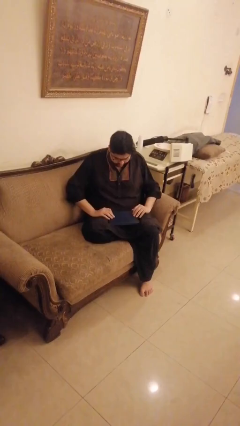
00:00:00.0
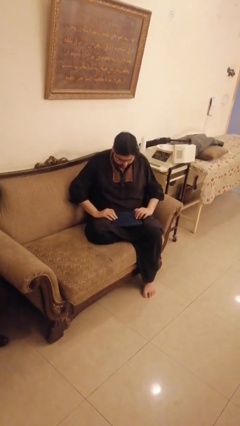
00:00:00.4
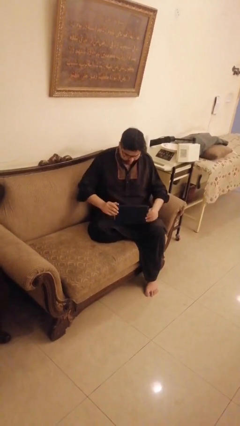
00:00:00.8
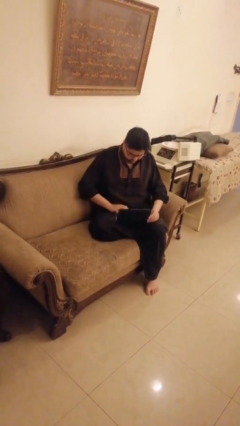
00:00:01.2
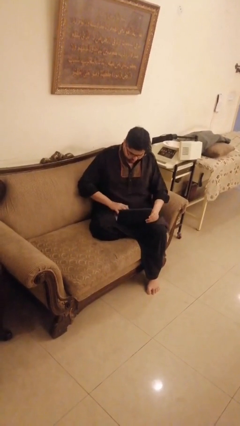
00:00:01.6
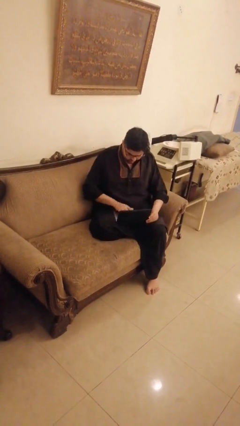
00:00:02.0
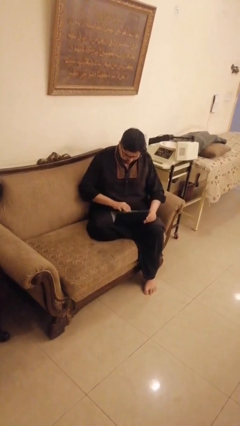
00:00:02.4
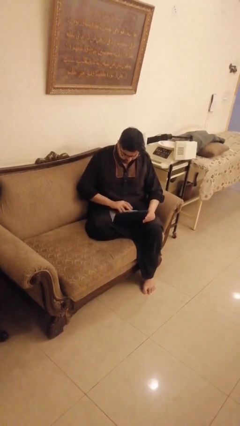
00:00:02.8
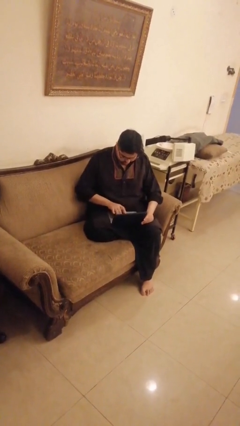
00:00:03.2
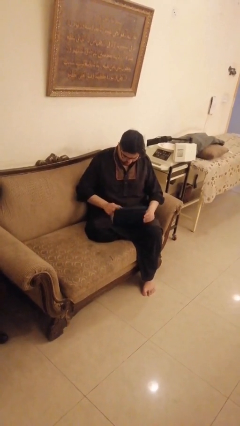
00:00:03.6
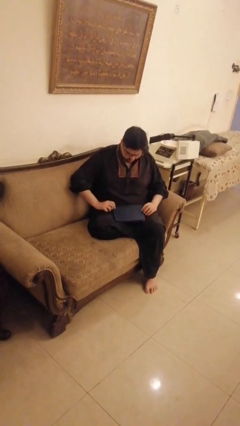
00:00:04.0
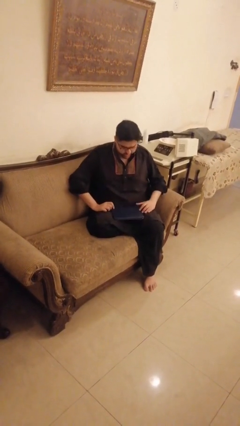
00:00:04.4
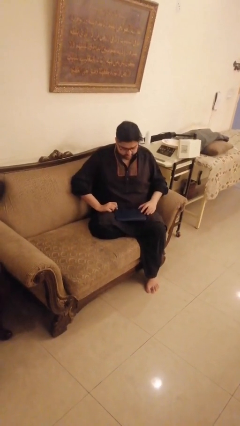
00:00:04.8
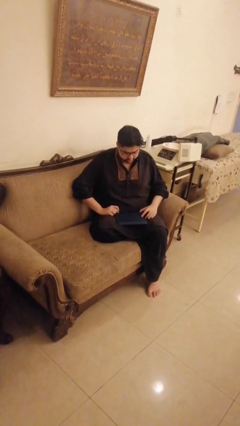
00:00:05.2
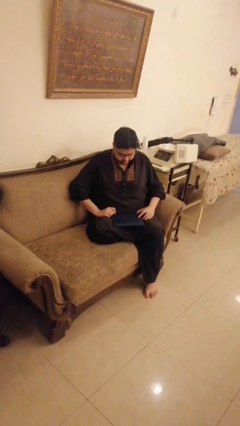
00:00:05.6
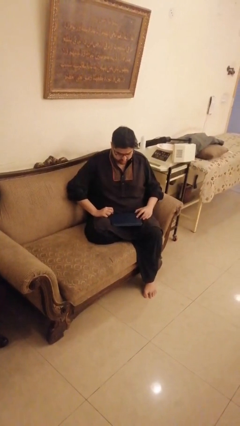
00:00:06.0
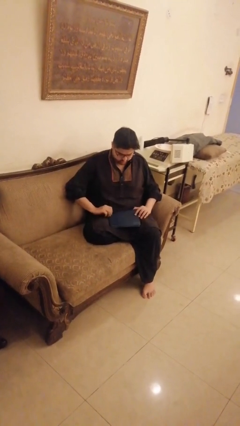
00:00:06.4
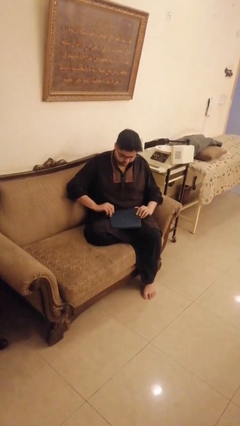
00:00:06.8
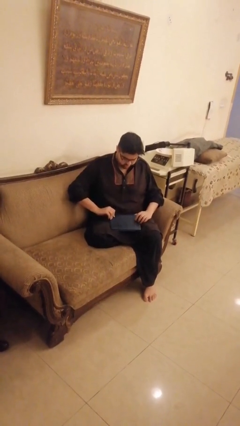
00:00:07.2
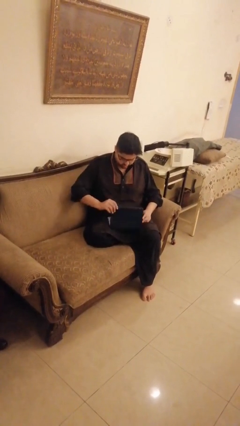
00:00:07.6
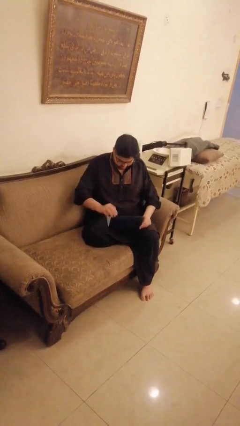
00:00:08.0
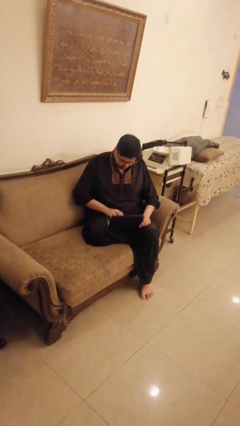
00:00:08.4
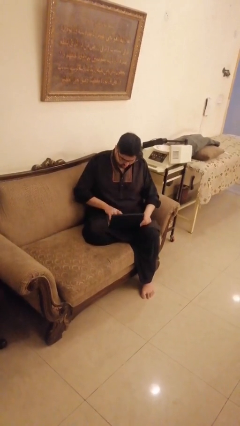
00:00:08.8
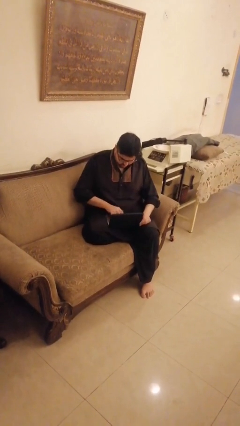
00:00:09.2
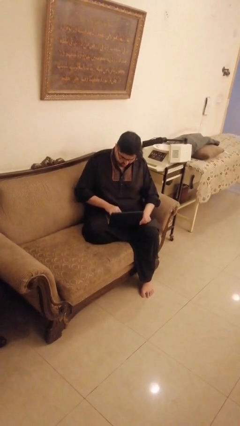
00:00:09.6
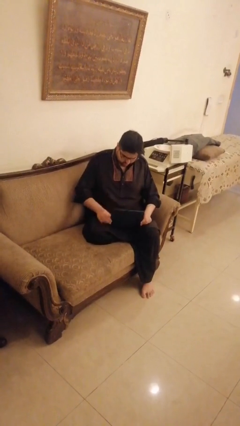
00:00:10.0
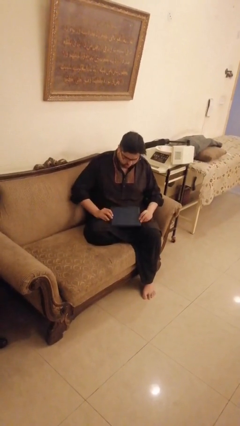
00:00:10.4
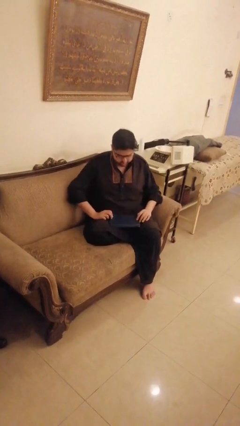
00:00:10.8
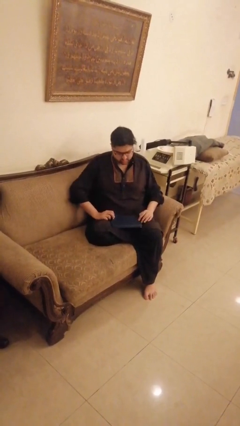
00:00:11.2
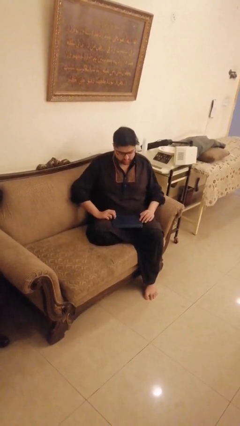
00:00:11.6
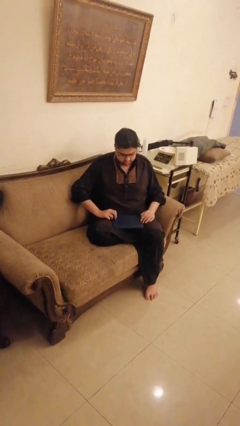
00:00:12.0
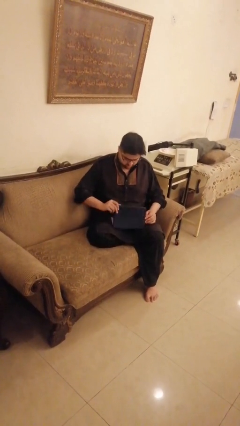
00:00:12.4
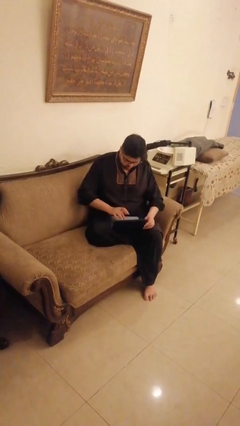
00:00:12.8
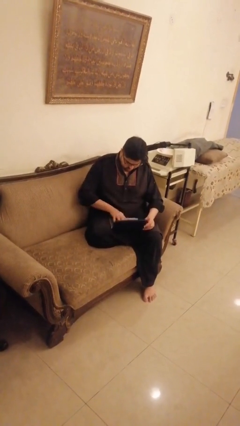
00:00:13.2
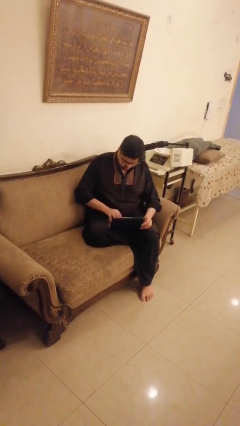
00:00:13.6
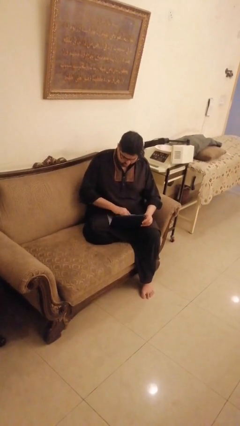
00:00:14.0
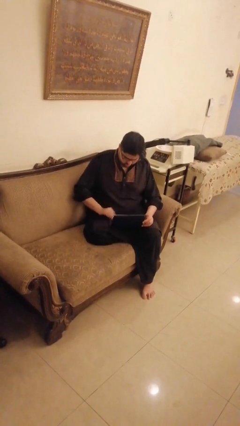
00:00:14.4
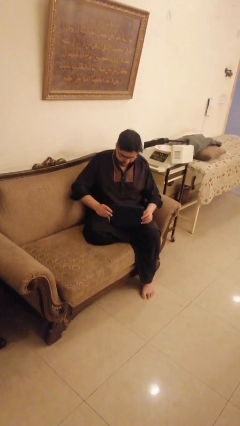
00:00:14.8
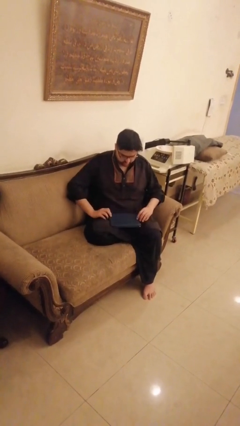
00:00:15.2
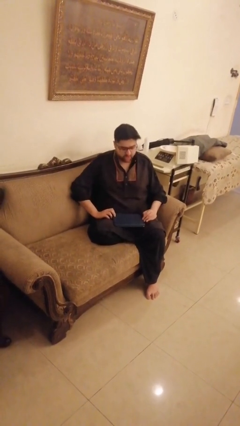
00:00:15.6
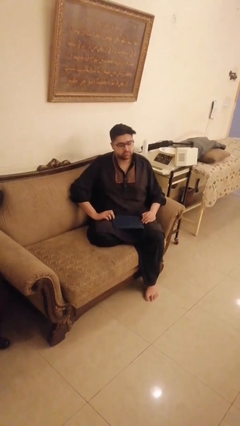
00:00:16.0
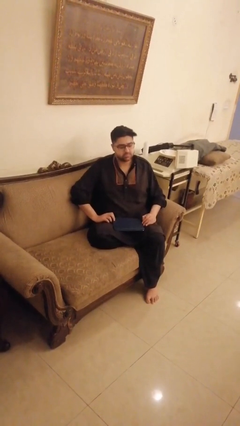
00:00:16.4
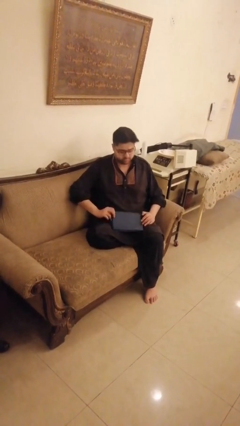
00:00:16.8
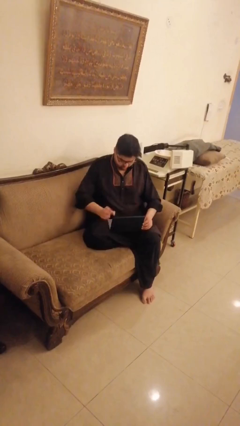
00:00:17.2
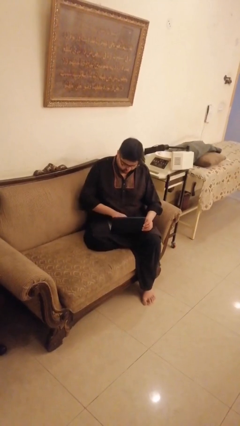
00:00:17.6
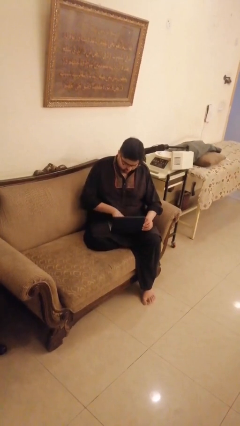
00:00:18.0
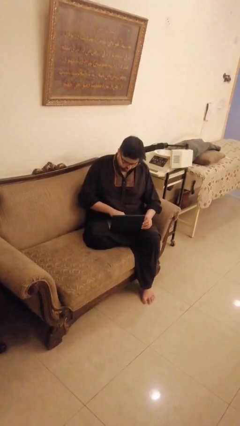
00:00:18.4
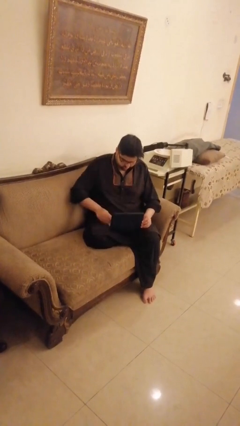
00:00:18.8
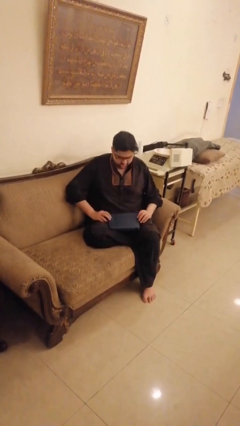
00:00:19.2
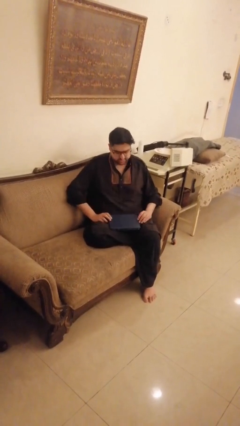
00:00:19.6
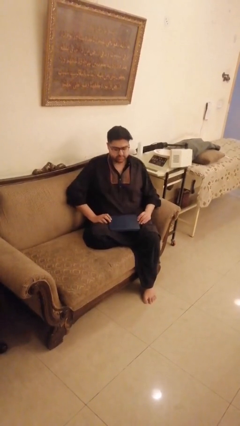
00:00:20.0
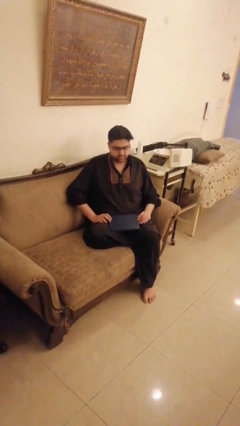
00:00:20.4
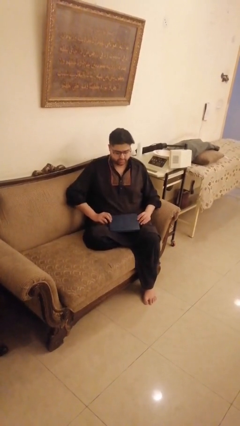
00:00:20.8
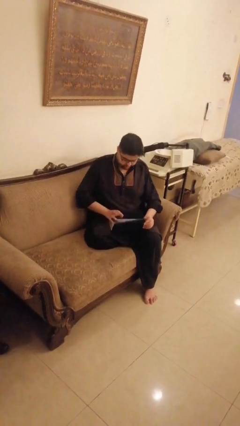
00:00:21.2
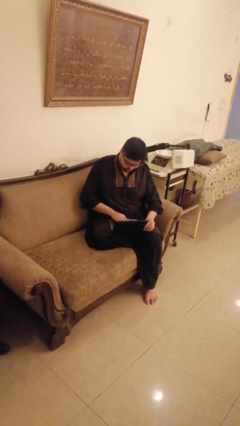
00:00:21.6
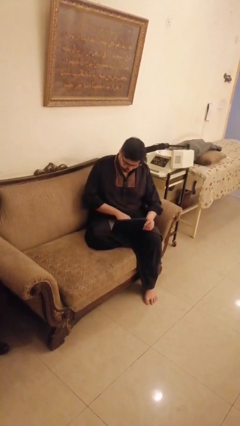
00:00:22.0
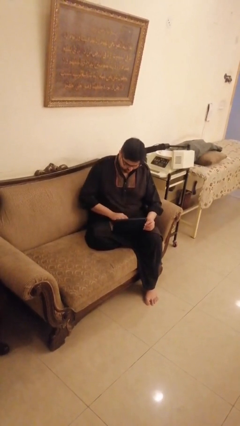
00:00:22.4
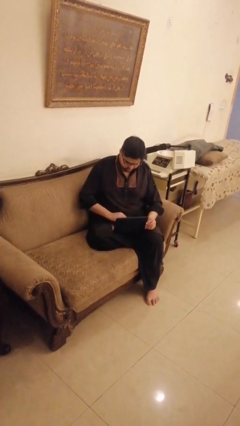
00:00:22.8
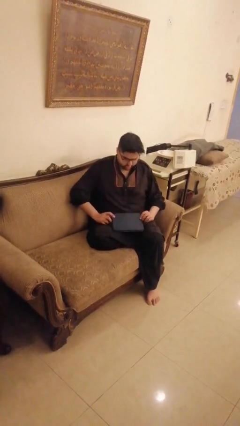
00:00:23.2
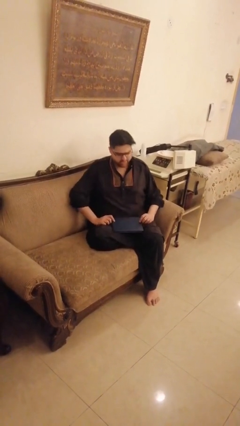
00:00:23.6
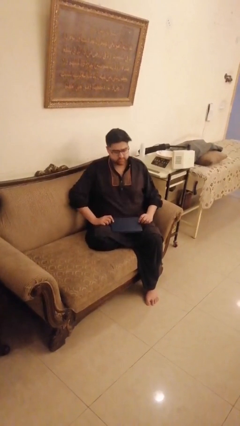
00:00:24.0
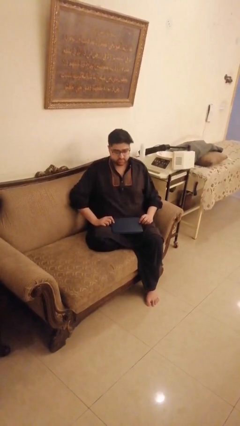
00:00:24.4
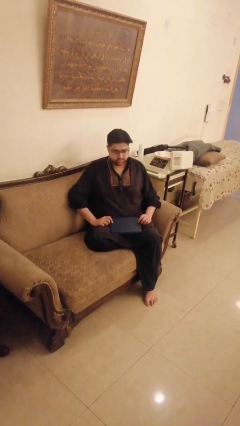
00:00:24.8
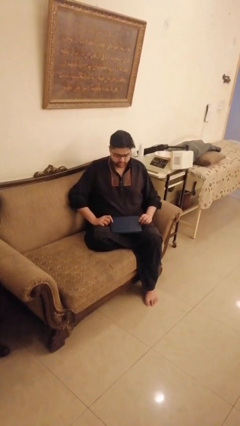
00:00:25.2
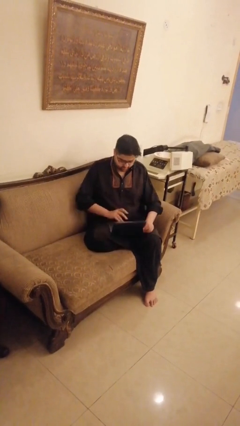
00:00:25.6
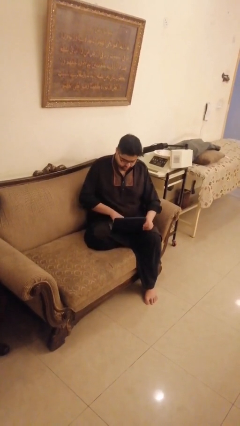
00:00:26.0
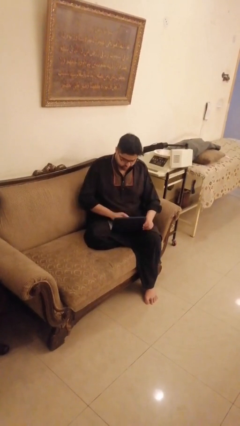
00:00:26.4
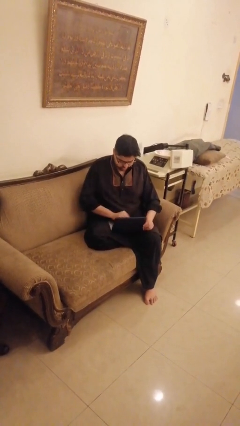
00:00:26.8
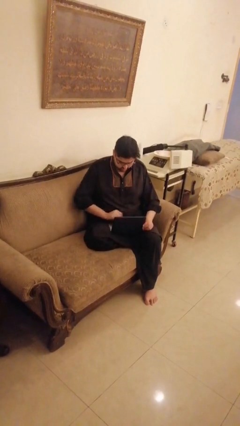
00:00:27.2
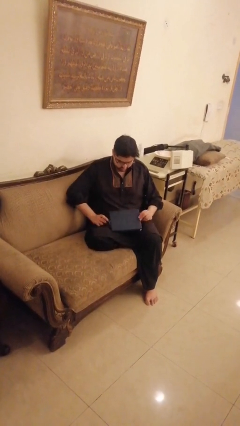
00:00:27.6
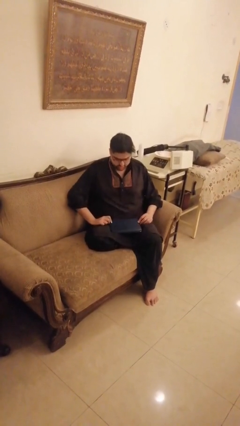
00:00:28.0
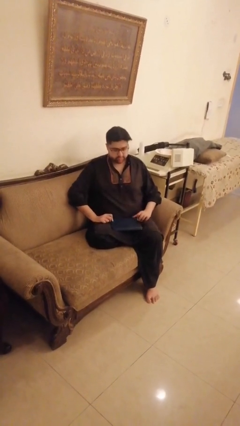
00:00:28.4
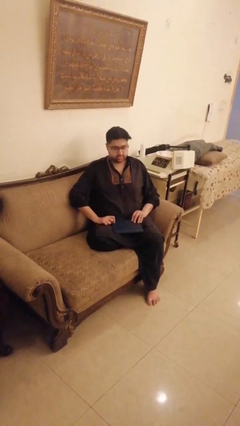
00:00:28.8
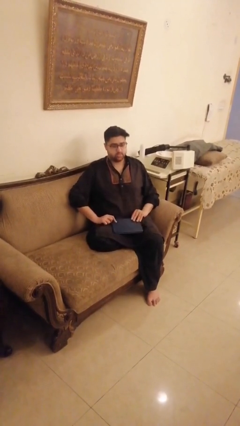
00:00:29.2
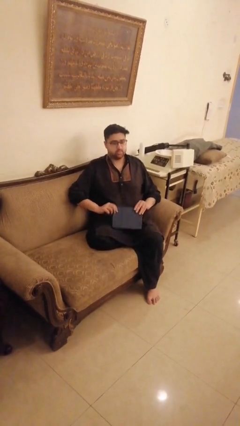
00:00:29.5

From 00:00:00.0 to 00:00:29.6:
person interacts with laptop

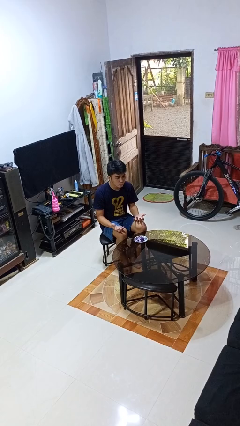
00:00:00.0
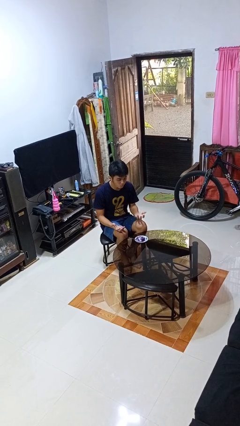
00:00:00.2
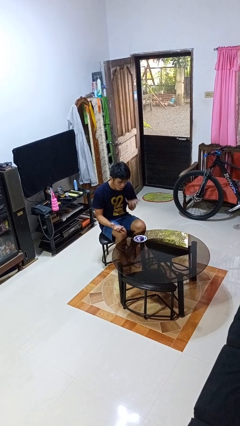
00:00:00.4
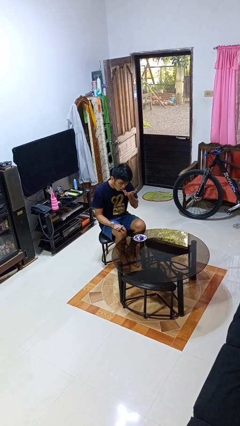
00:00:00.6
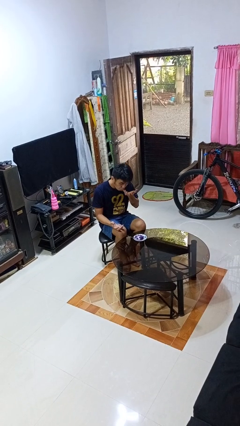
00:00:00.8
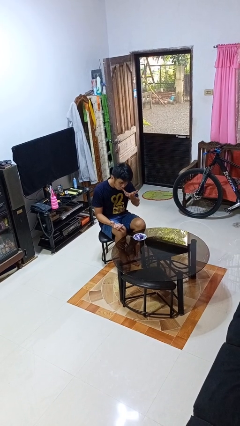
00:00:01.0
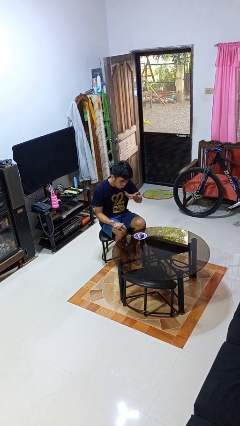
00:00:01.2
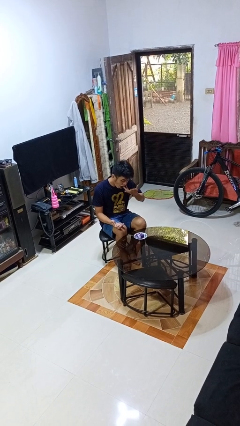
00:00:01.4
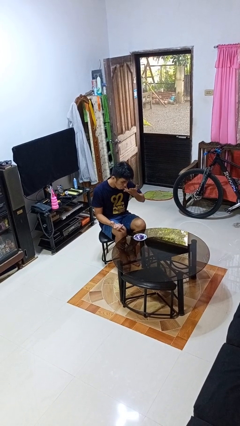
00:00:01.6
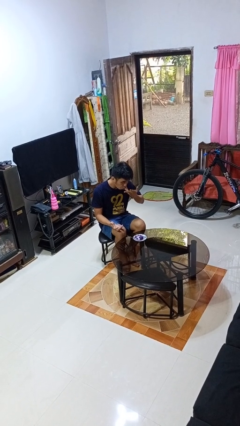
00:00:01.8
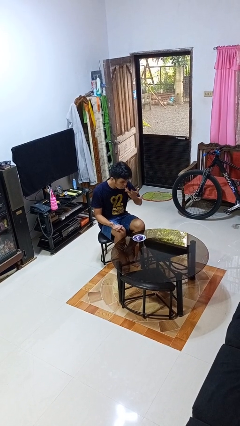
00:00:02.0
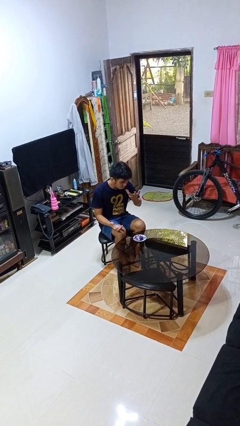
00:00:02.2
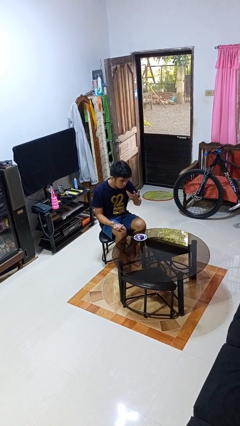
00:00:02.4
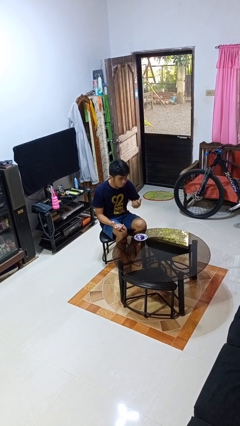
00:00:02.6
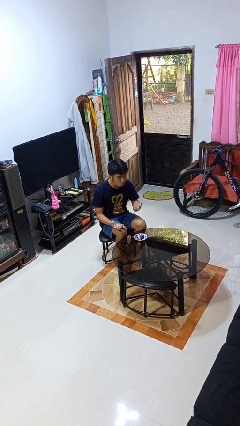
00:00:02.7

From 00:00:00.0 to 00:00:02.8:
person licks fingers

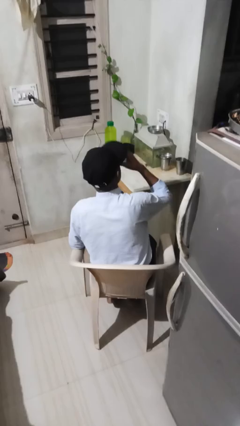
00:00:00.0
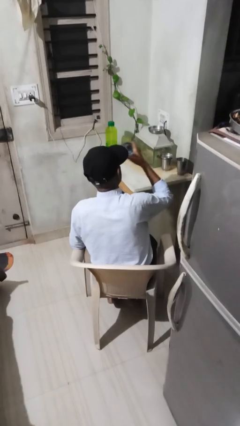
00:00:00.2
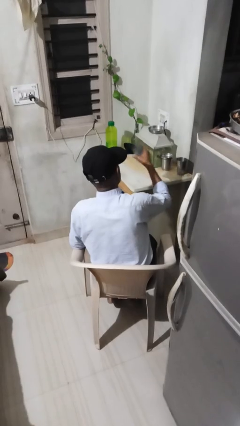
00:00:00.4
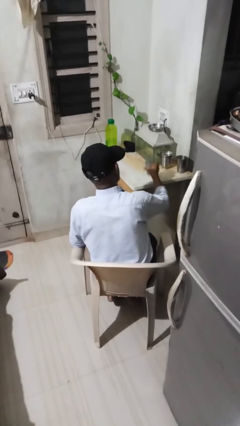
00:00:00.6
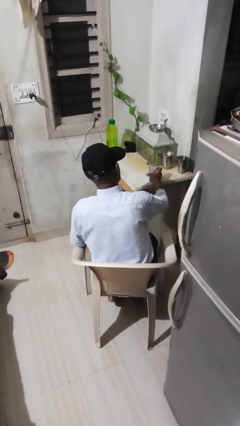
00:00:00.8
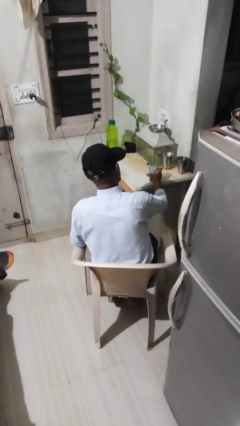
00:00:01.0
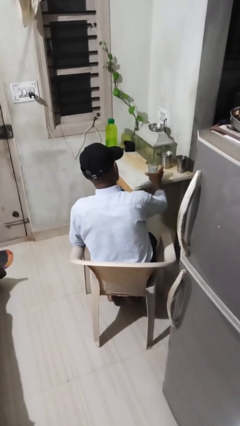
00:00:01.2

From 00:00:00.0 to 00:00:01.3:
person puts down object on table
